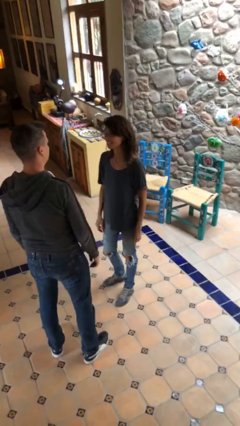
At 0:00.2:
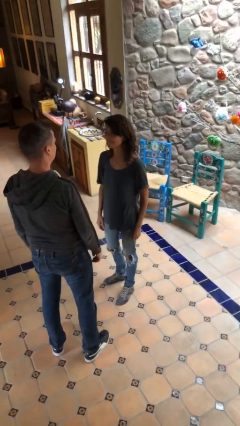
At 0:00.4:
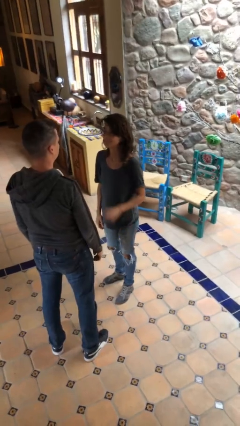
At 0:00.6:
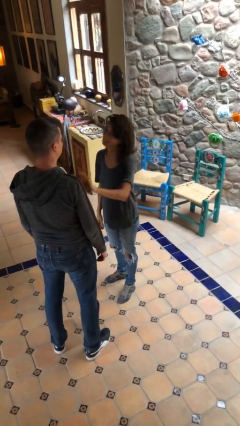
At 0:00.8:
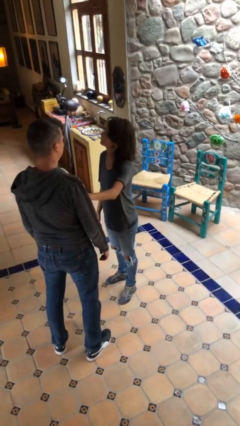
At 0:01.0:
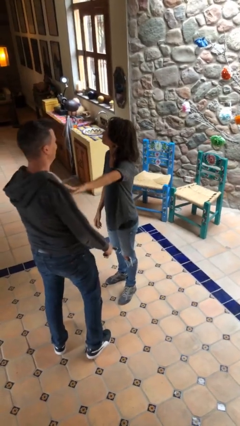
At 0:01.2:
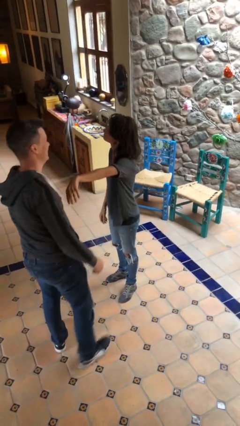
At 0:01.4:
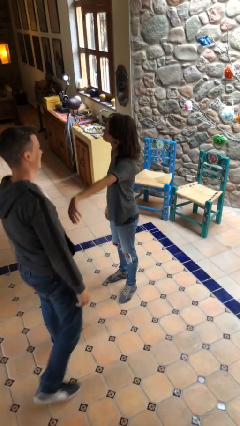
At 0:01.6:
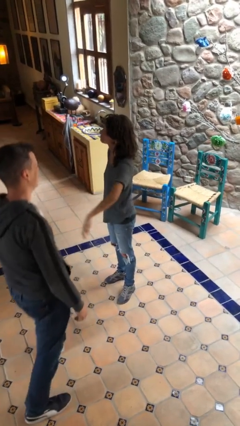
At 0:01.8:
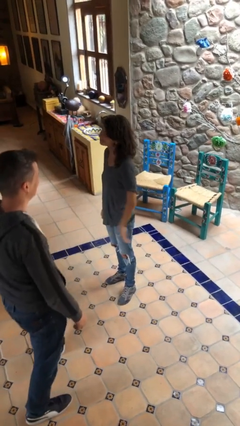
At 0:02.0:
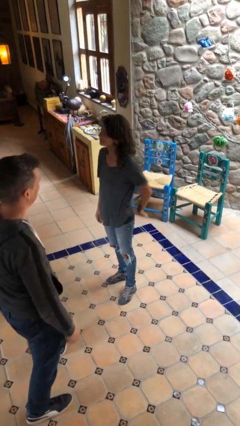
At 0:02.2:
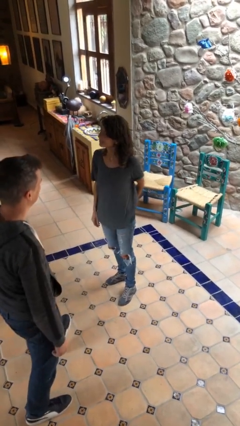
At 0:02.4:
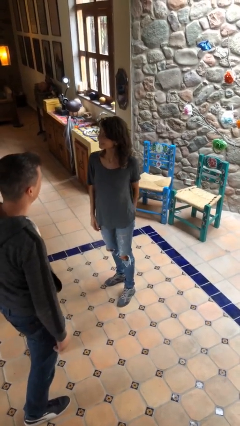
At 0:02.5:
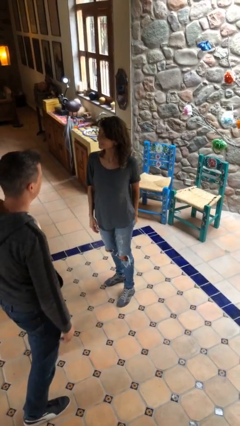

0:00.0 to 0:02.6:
person shoves person

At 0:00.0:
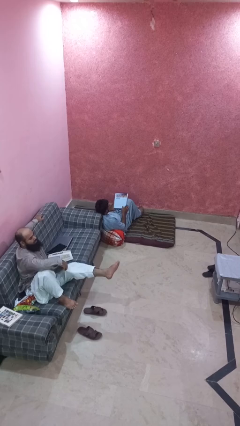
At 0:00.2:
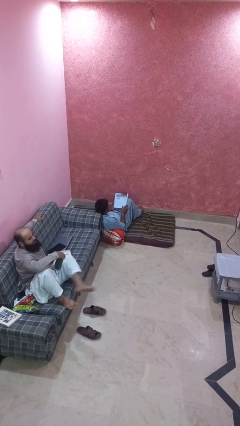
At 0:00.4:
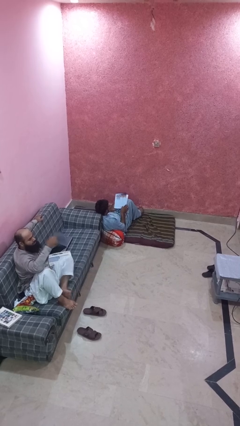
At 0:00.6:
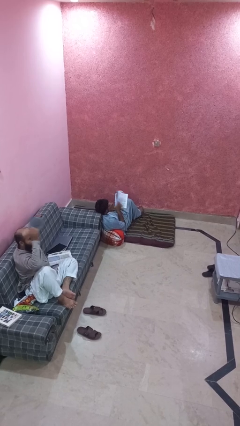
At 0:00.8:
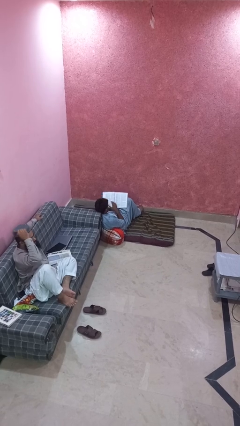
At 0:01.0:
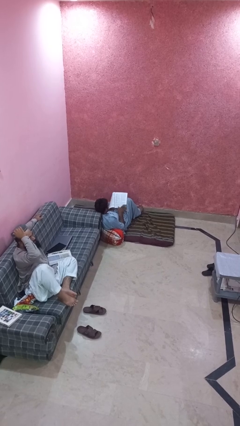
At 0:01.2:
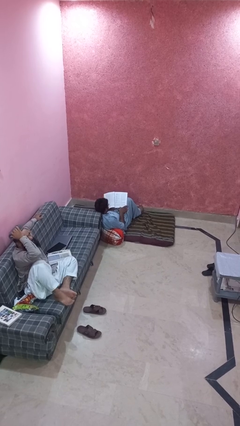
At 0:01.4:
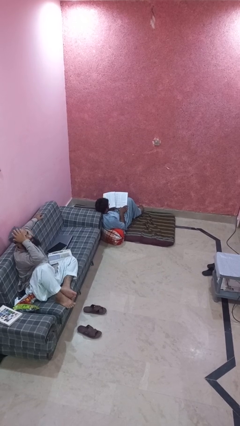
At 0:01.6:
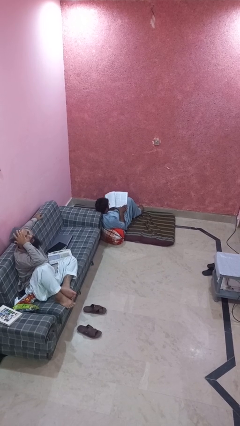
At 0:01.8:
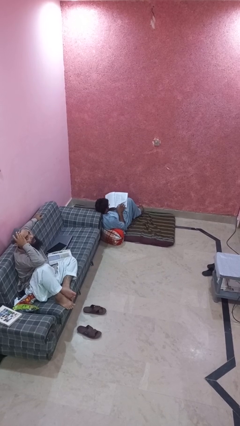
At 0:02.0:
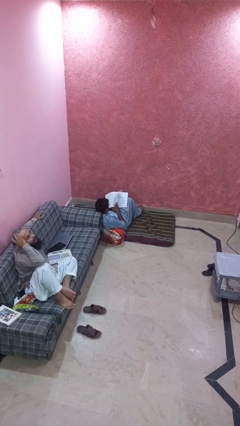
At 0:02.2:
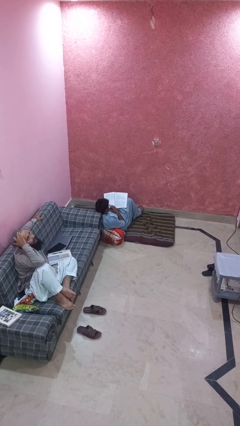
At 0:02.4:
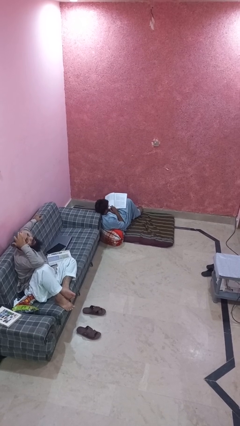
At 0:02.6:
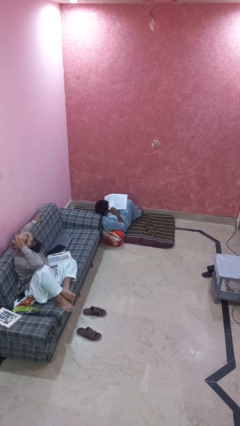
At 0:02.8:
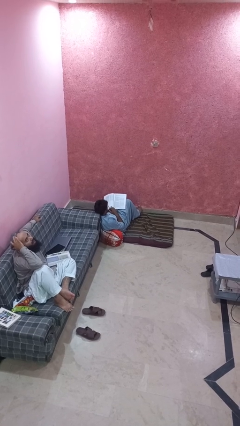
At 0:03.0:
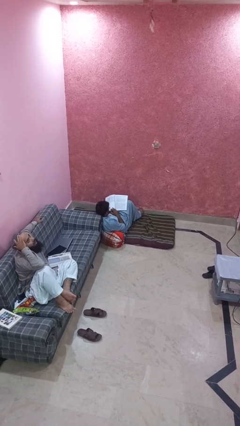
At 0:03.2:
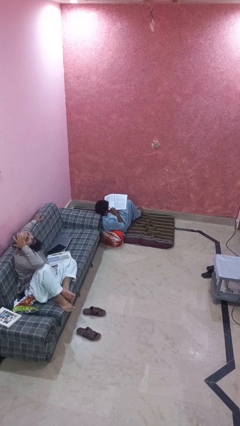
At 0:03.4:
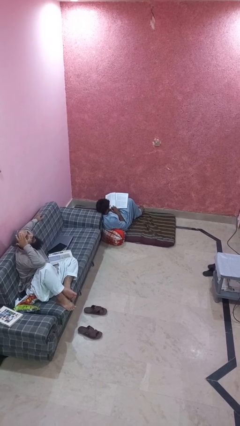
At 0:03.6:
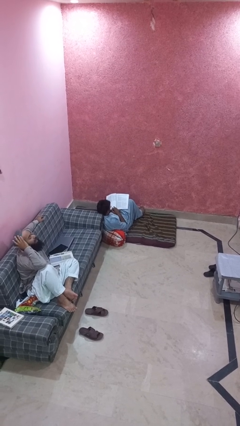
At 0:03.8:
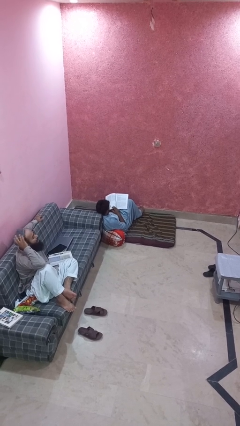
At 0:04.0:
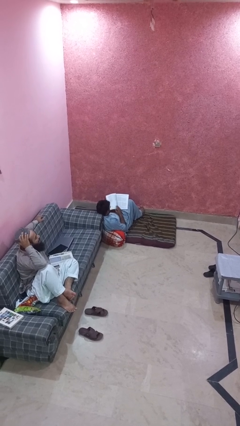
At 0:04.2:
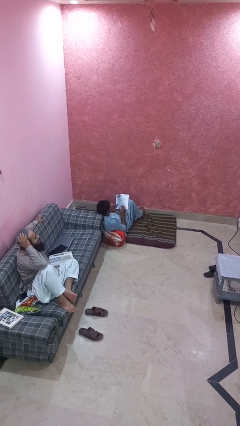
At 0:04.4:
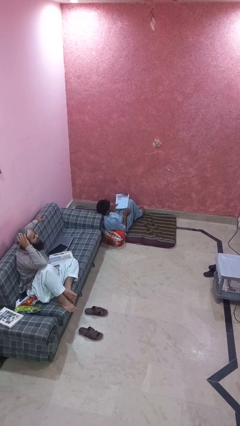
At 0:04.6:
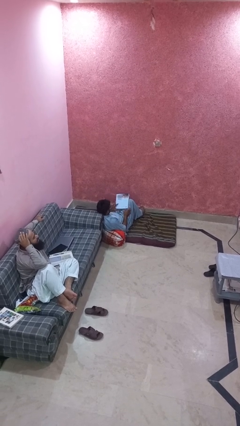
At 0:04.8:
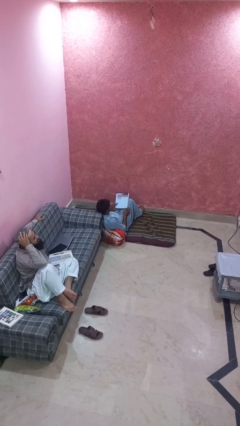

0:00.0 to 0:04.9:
person reads magazine

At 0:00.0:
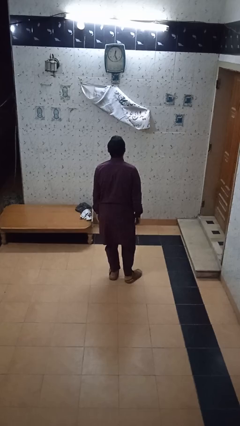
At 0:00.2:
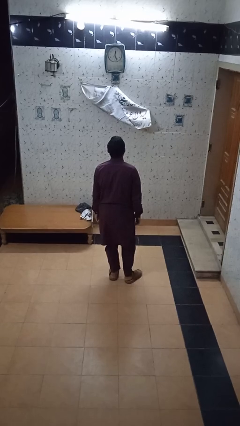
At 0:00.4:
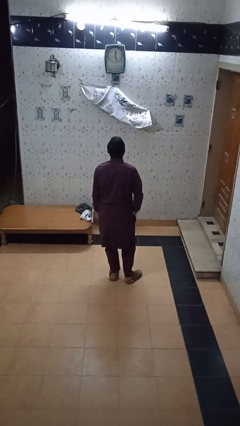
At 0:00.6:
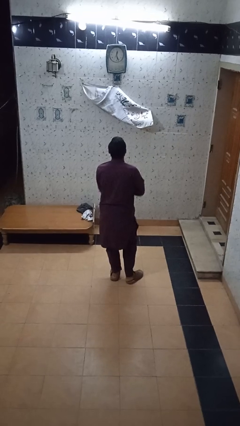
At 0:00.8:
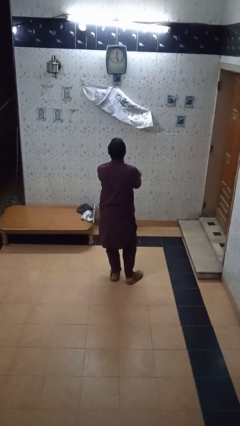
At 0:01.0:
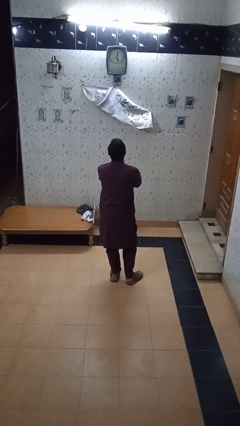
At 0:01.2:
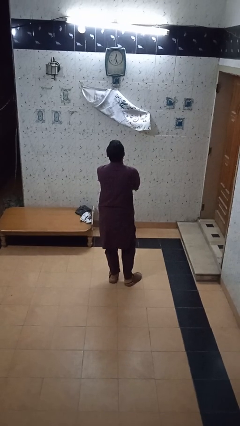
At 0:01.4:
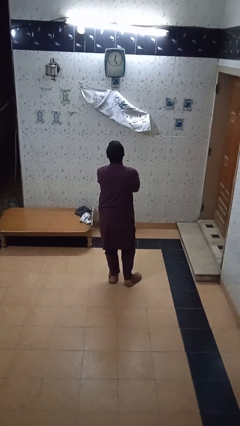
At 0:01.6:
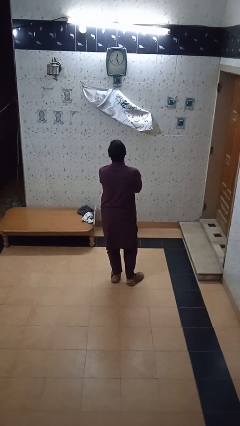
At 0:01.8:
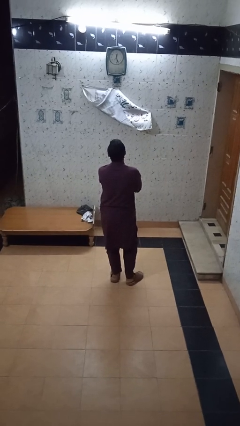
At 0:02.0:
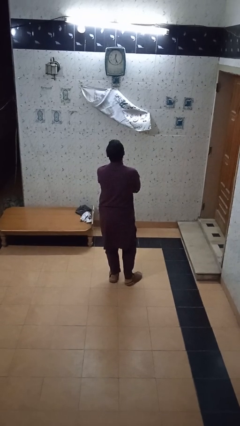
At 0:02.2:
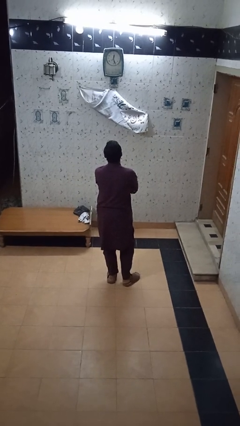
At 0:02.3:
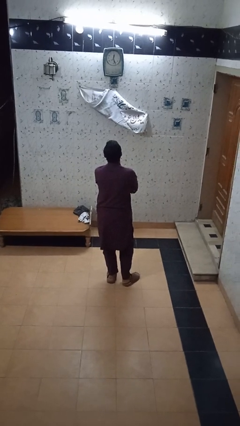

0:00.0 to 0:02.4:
person crosses arms

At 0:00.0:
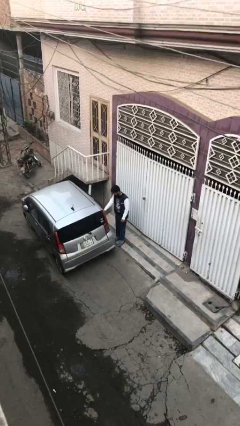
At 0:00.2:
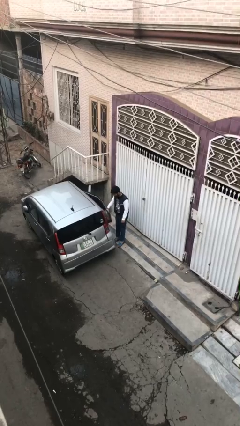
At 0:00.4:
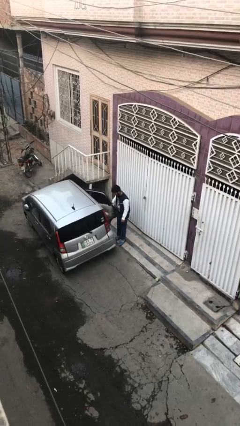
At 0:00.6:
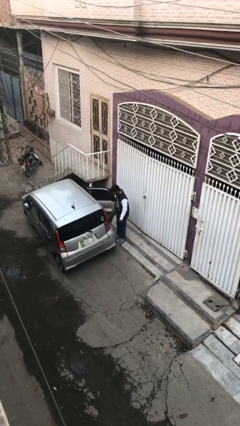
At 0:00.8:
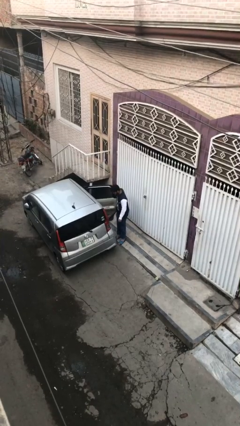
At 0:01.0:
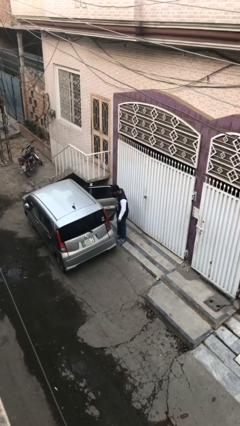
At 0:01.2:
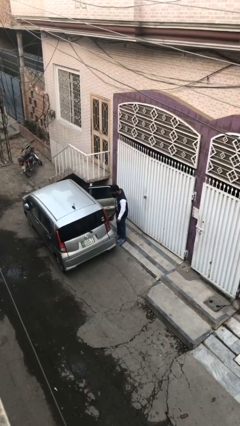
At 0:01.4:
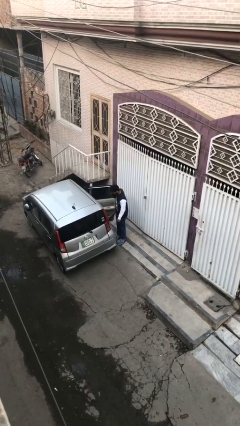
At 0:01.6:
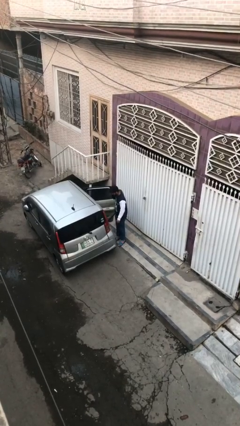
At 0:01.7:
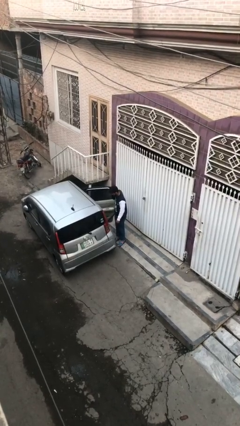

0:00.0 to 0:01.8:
person opens car door

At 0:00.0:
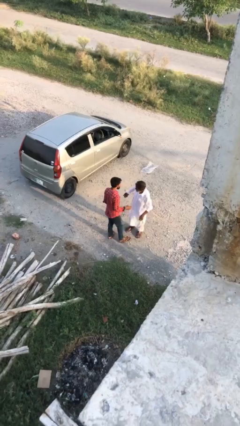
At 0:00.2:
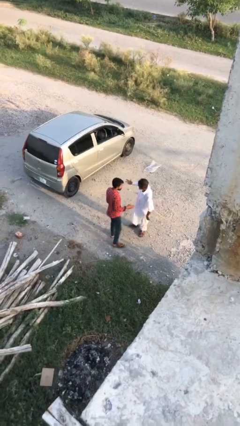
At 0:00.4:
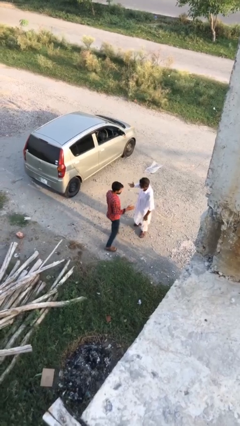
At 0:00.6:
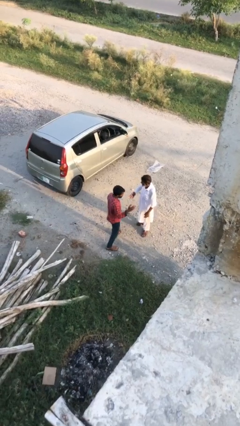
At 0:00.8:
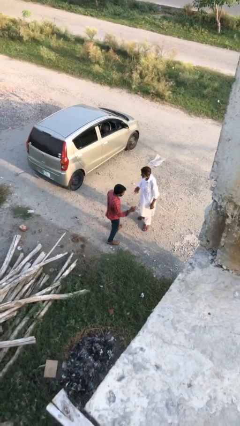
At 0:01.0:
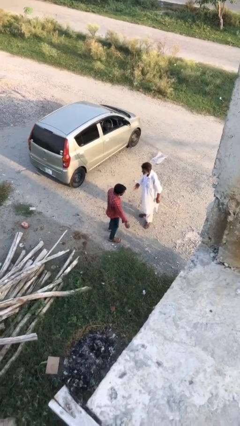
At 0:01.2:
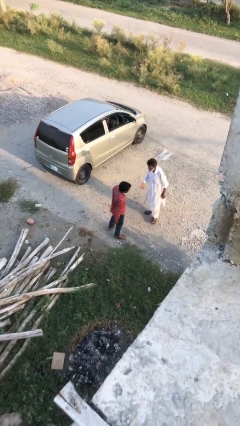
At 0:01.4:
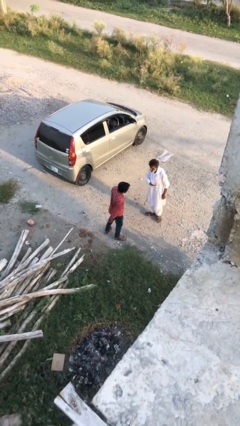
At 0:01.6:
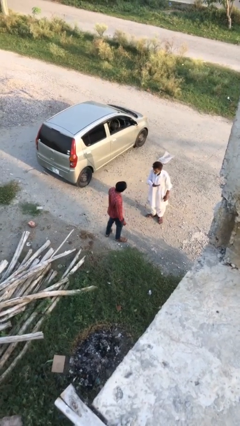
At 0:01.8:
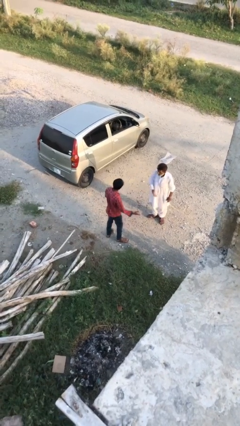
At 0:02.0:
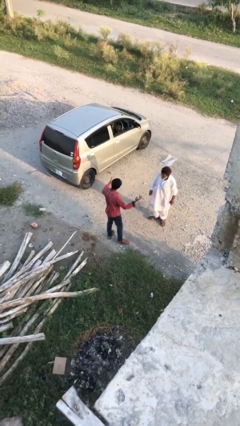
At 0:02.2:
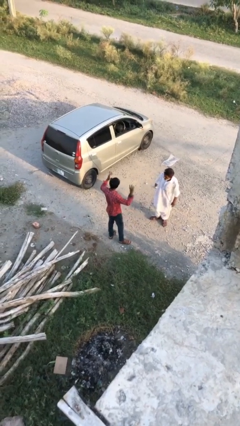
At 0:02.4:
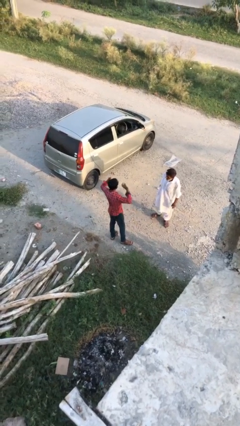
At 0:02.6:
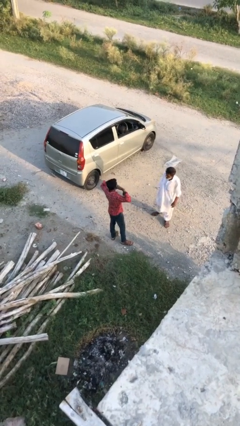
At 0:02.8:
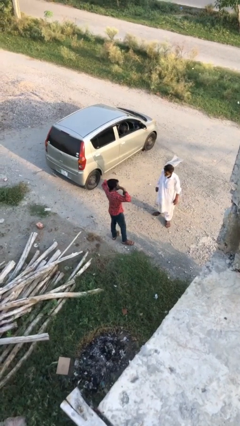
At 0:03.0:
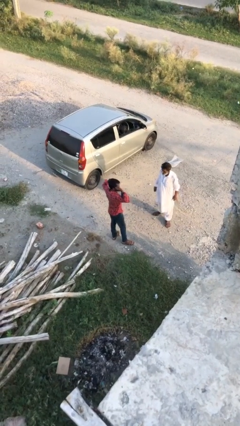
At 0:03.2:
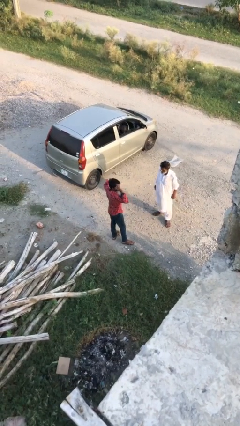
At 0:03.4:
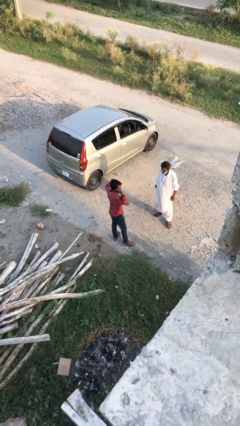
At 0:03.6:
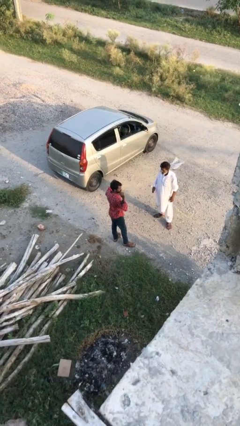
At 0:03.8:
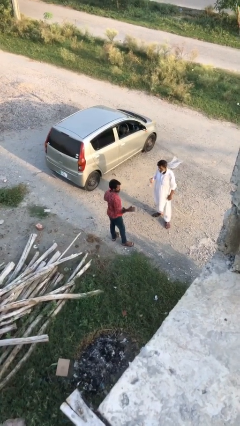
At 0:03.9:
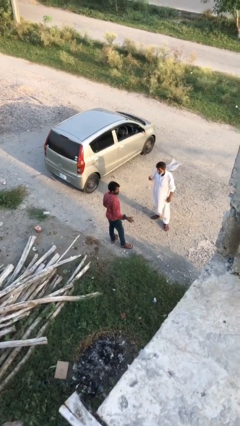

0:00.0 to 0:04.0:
person talks to person

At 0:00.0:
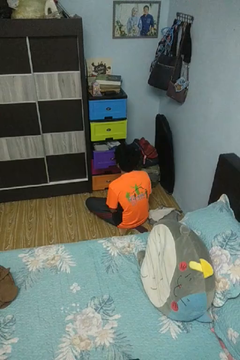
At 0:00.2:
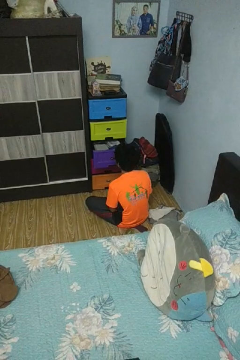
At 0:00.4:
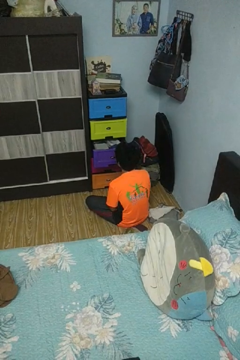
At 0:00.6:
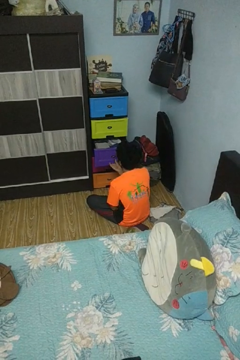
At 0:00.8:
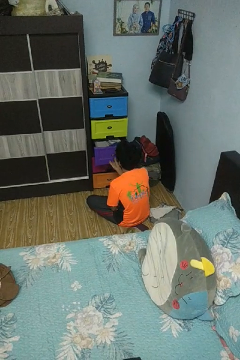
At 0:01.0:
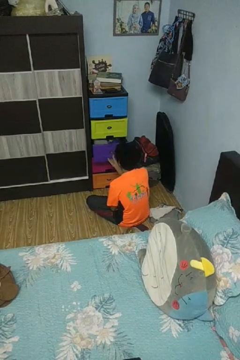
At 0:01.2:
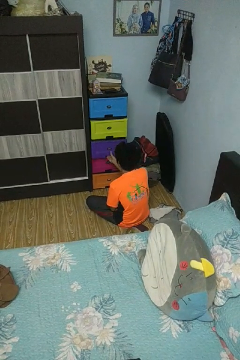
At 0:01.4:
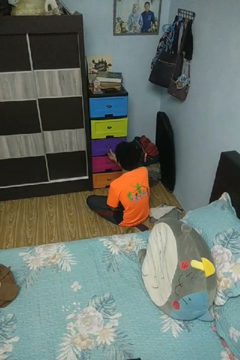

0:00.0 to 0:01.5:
person closes dresser drawer

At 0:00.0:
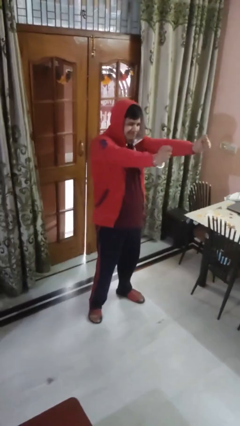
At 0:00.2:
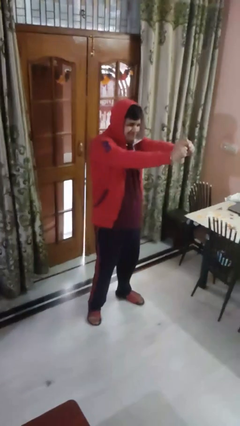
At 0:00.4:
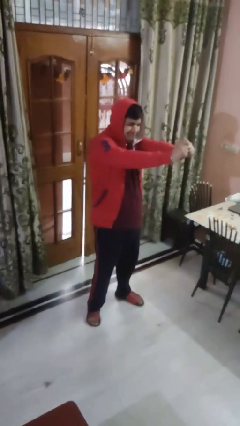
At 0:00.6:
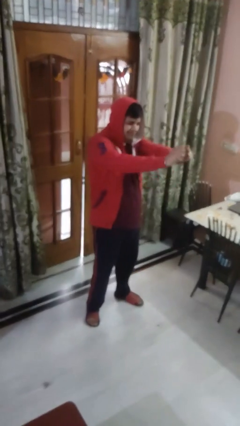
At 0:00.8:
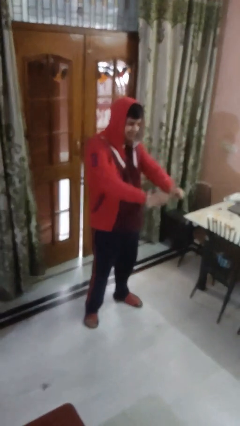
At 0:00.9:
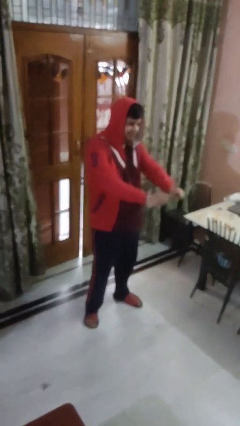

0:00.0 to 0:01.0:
person gestures zoom out
